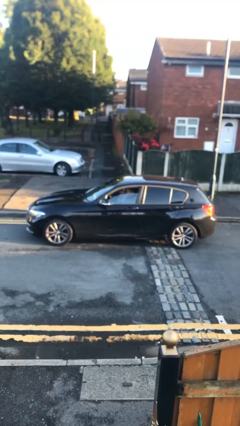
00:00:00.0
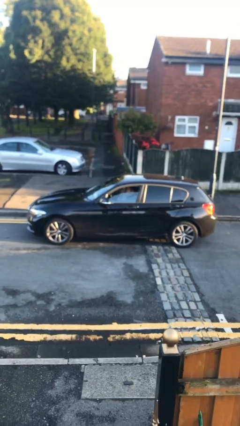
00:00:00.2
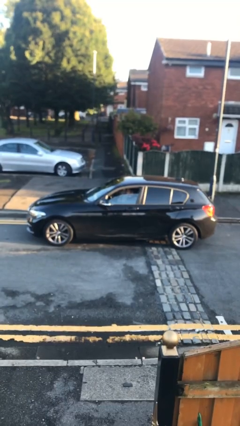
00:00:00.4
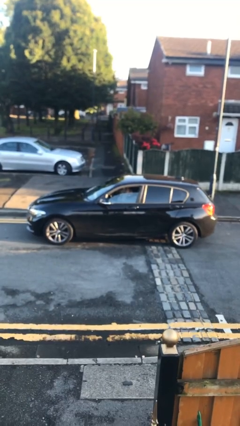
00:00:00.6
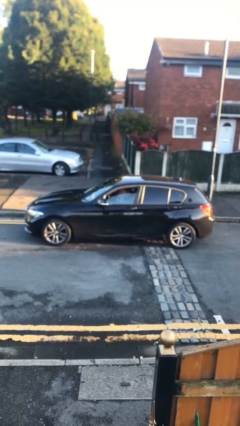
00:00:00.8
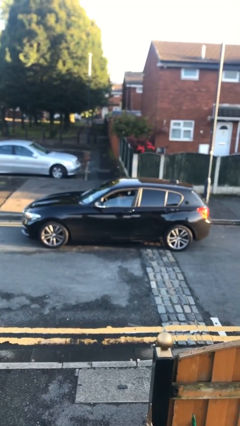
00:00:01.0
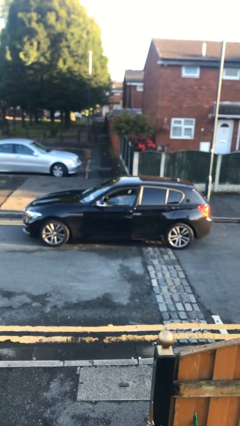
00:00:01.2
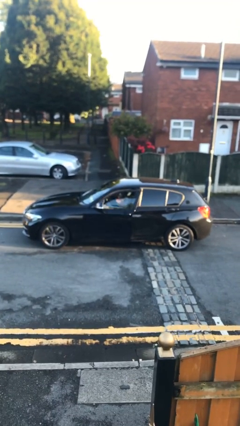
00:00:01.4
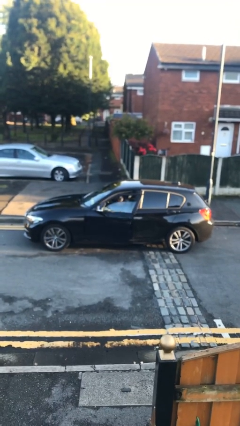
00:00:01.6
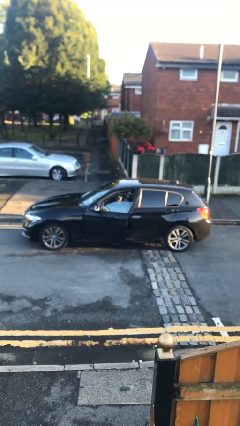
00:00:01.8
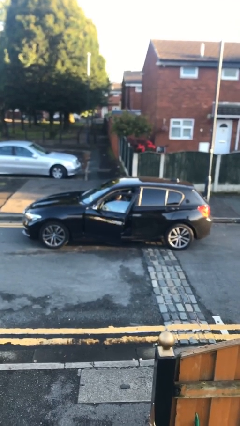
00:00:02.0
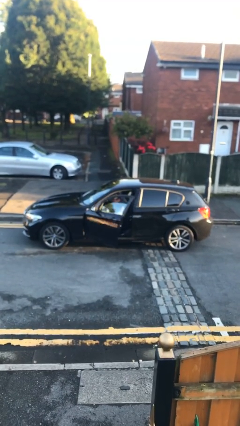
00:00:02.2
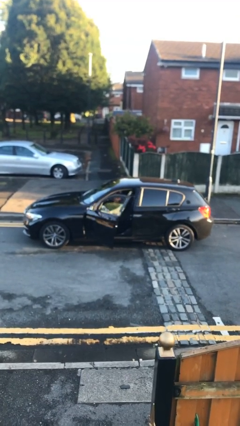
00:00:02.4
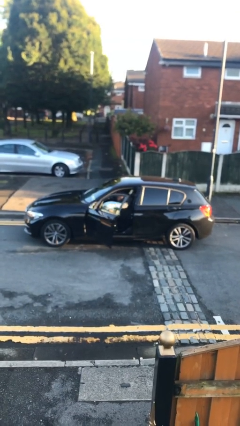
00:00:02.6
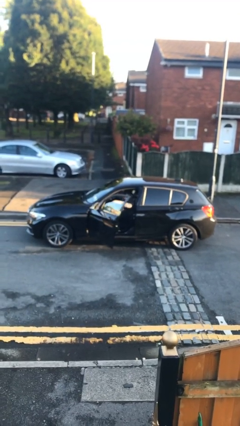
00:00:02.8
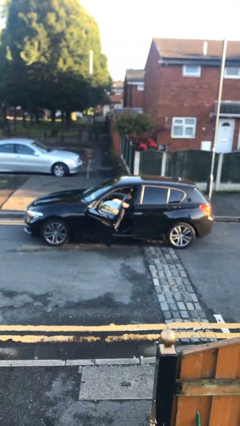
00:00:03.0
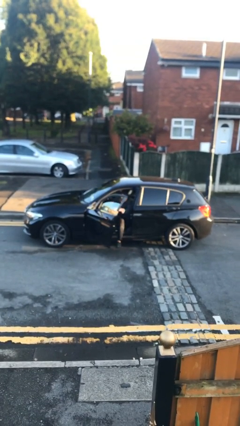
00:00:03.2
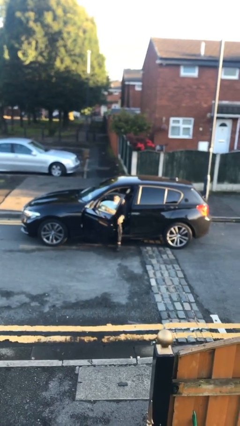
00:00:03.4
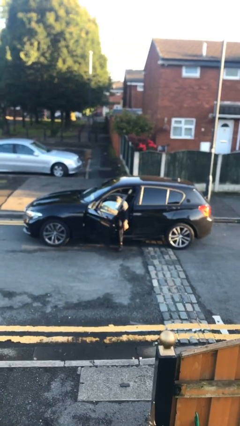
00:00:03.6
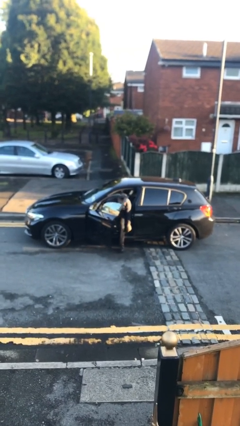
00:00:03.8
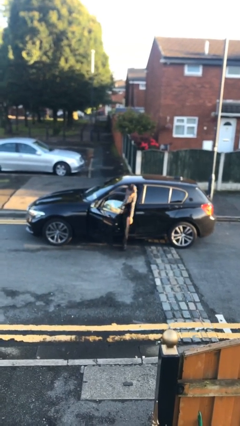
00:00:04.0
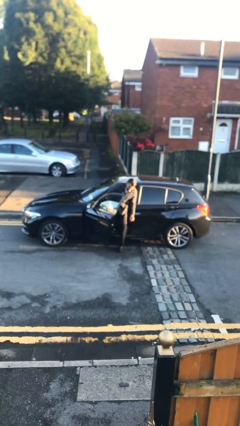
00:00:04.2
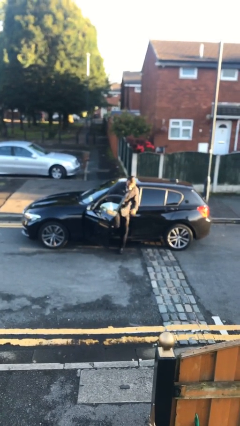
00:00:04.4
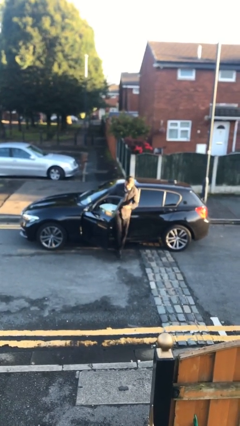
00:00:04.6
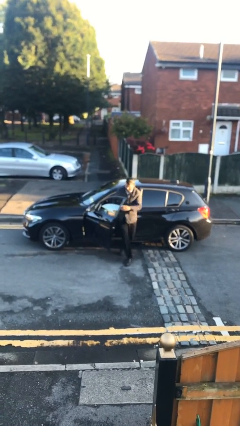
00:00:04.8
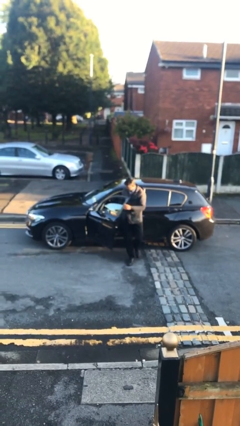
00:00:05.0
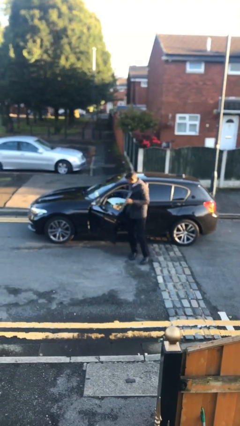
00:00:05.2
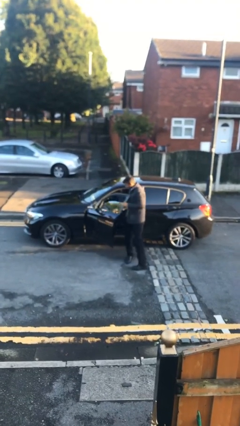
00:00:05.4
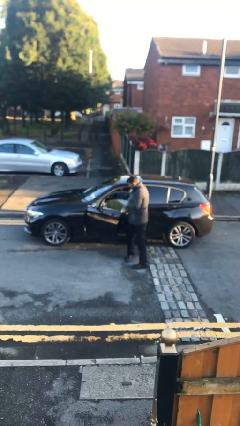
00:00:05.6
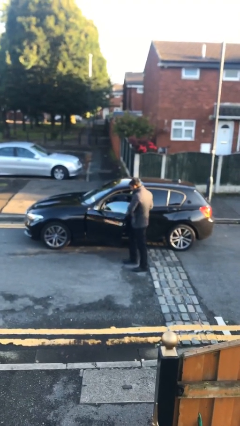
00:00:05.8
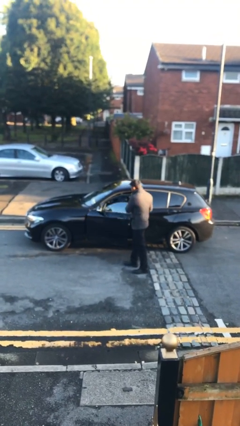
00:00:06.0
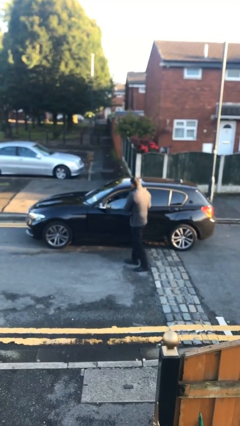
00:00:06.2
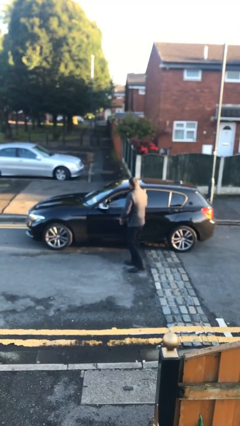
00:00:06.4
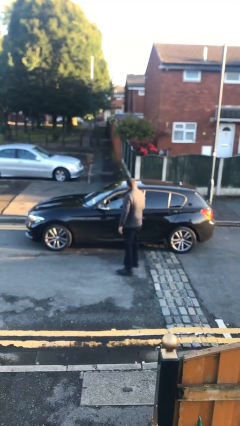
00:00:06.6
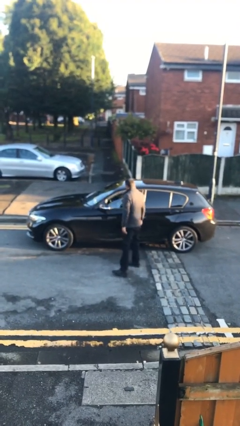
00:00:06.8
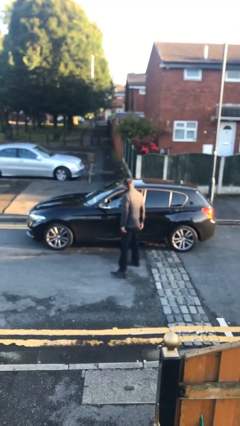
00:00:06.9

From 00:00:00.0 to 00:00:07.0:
car drops off person

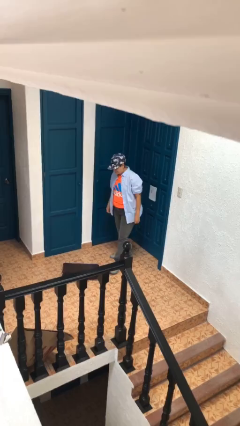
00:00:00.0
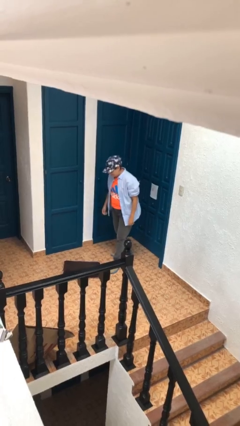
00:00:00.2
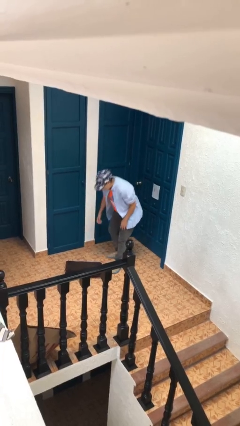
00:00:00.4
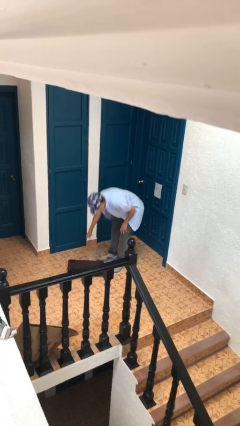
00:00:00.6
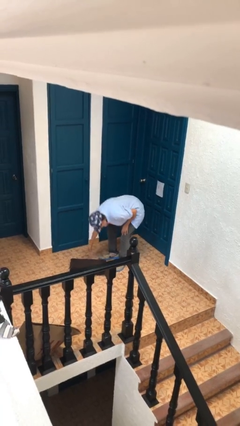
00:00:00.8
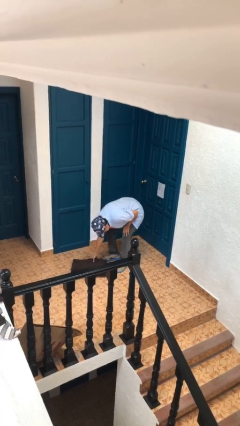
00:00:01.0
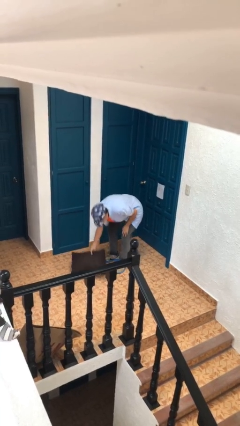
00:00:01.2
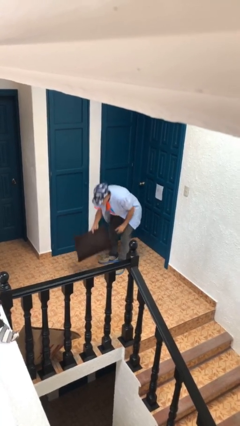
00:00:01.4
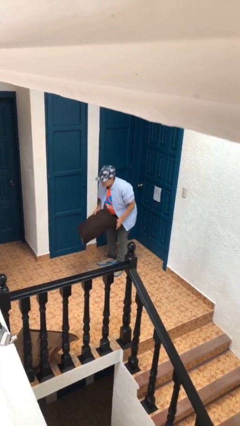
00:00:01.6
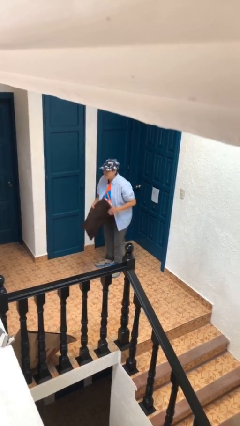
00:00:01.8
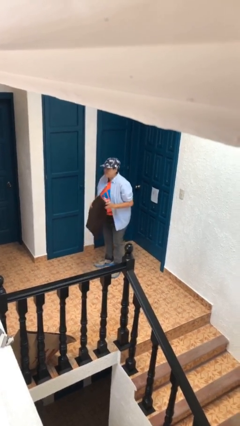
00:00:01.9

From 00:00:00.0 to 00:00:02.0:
person picks up object from floor

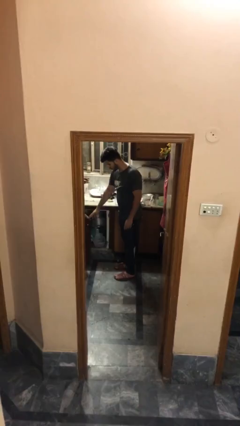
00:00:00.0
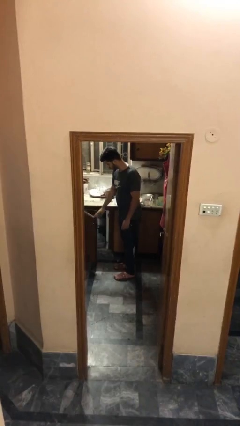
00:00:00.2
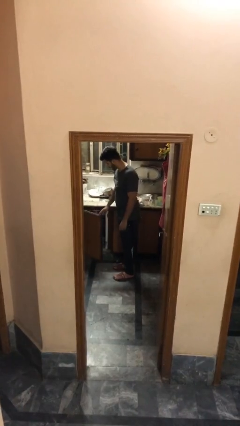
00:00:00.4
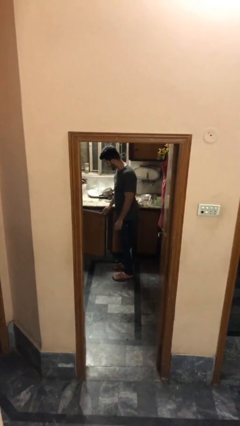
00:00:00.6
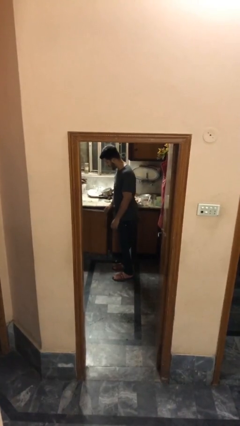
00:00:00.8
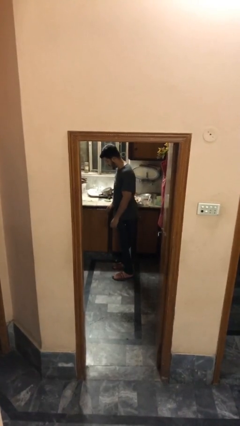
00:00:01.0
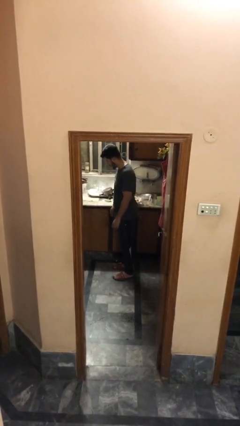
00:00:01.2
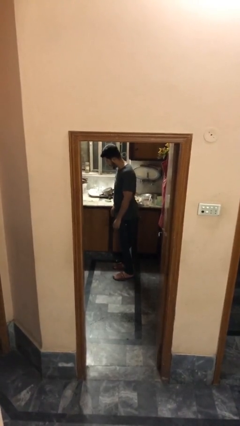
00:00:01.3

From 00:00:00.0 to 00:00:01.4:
person closes cabinet

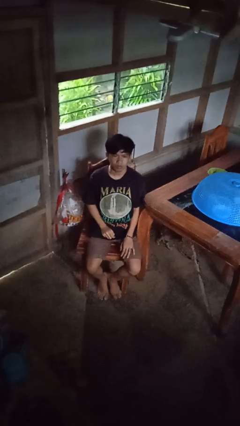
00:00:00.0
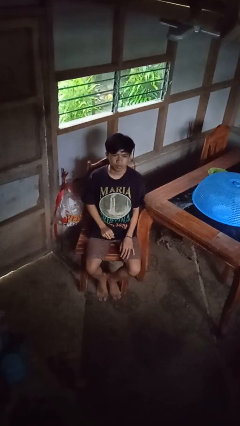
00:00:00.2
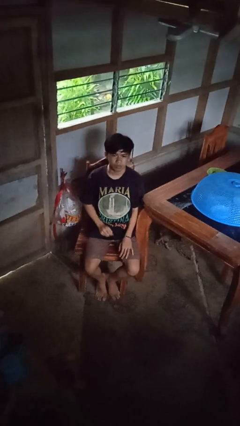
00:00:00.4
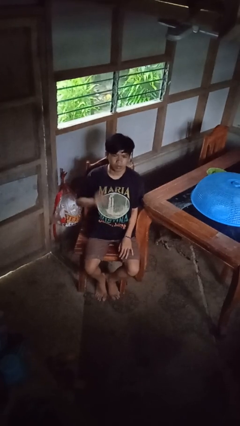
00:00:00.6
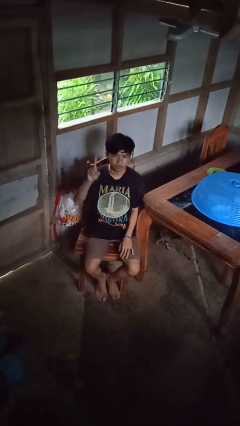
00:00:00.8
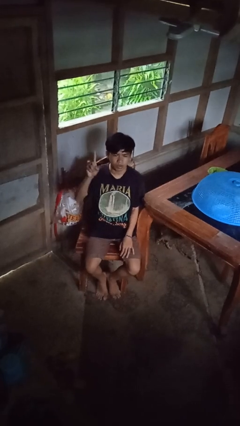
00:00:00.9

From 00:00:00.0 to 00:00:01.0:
person gestures number one

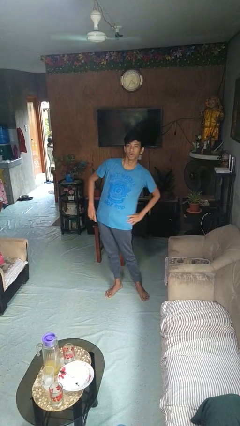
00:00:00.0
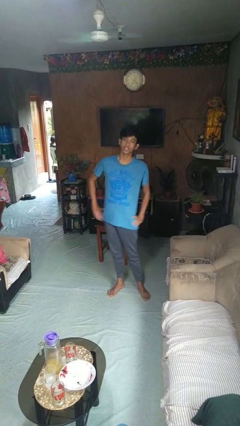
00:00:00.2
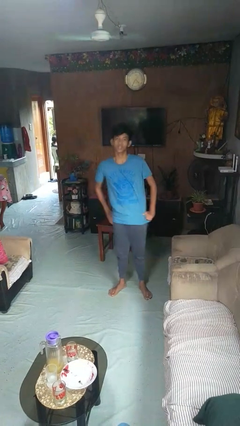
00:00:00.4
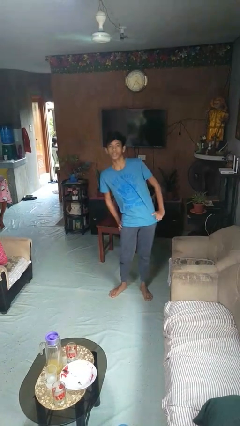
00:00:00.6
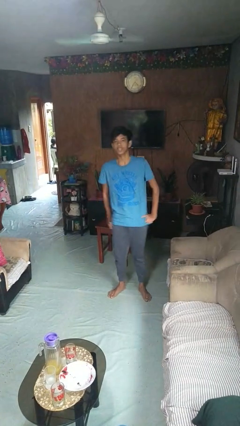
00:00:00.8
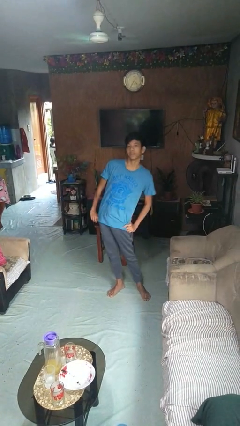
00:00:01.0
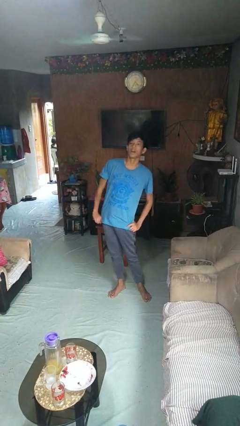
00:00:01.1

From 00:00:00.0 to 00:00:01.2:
person dances in place

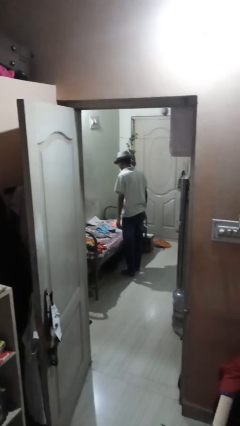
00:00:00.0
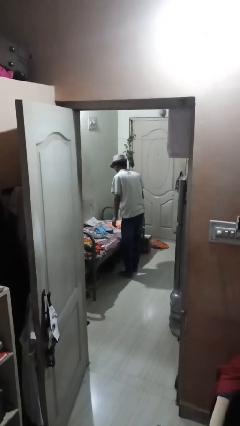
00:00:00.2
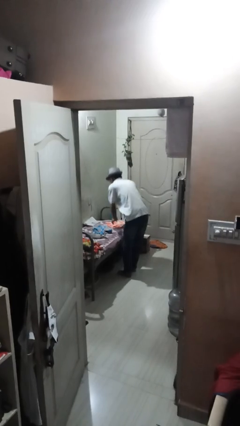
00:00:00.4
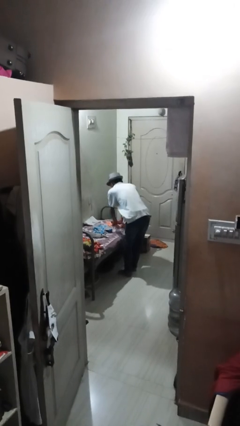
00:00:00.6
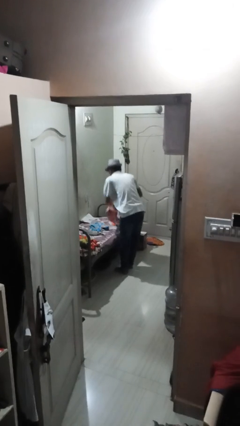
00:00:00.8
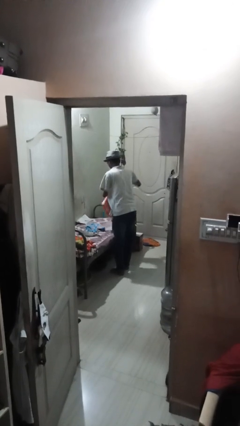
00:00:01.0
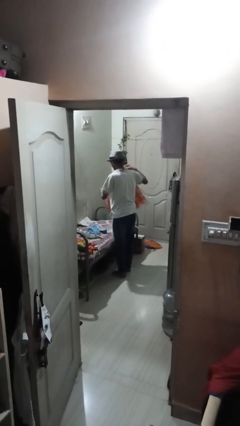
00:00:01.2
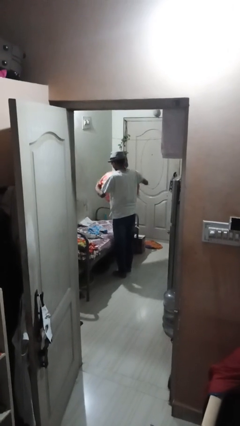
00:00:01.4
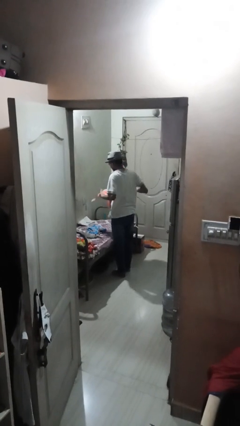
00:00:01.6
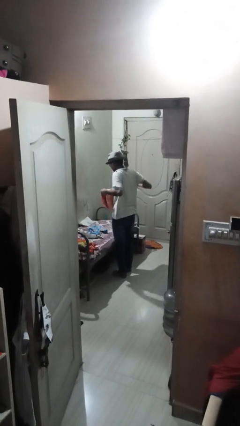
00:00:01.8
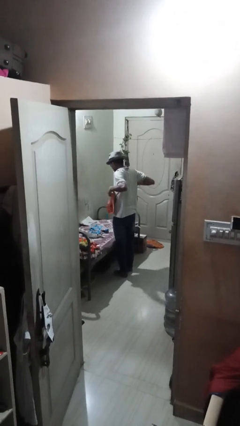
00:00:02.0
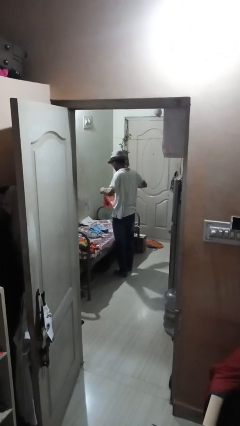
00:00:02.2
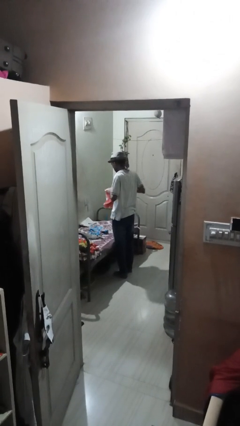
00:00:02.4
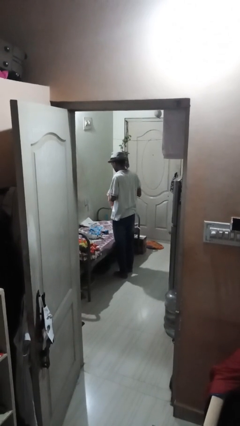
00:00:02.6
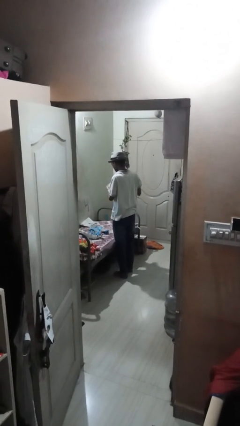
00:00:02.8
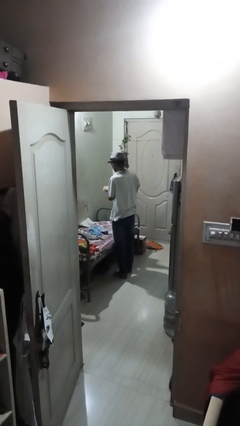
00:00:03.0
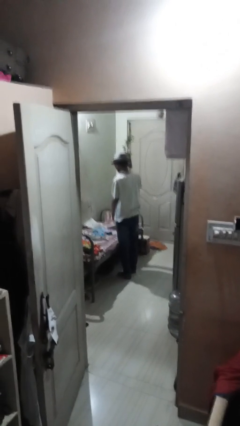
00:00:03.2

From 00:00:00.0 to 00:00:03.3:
person folds towel

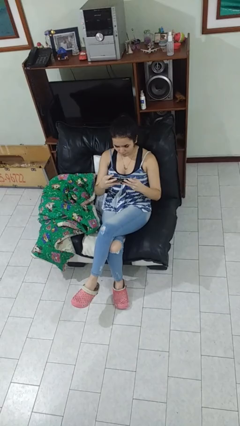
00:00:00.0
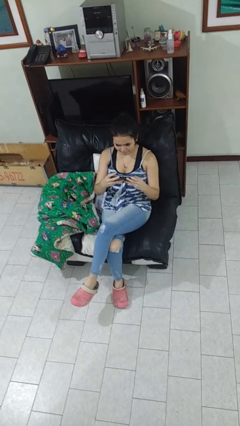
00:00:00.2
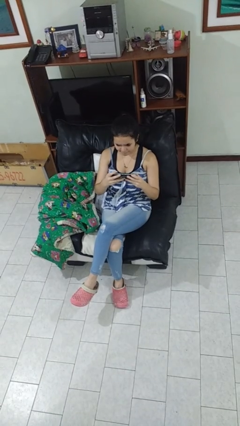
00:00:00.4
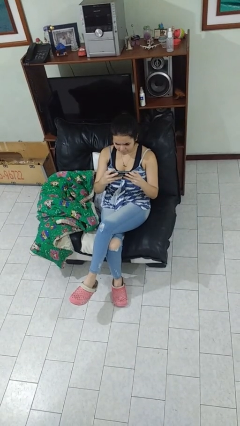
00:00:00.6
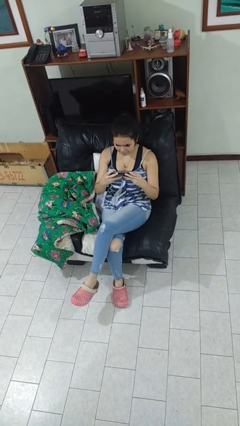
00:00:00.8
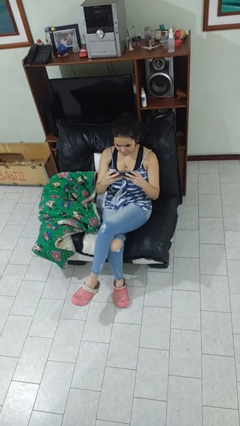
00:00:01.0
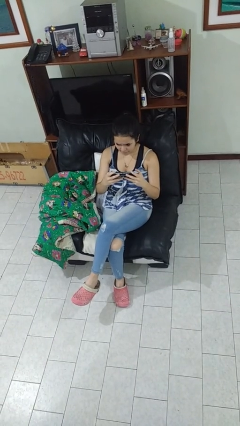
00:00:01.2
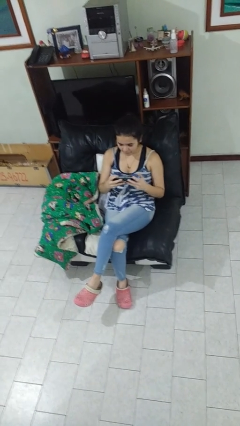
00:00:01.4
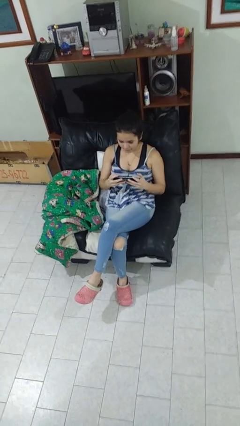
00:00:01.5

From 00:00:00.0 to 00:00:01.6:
person interacts with handheld game
